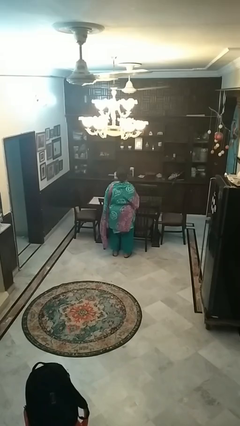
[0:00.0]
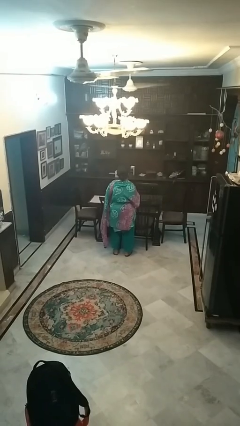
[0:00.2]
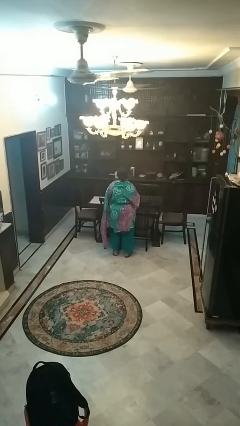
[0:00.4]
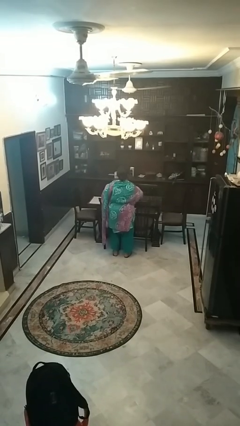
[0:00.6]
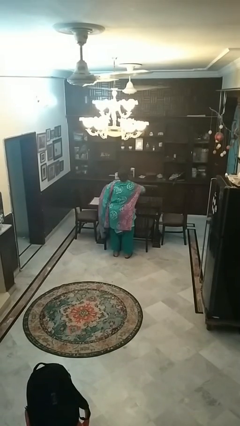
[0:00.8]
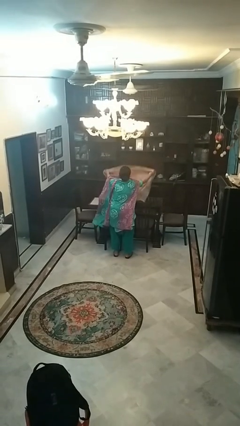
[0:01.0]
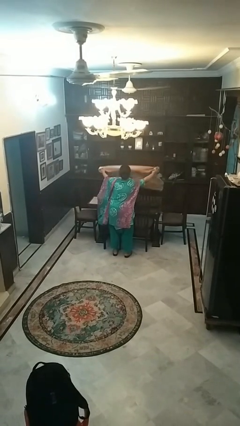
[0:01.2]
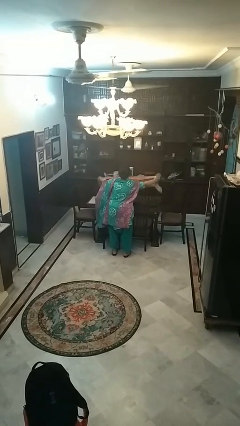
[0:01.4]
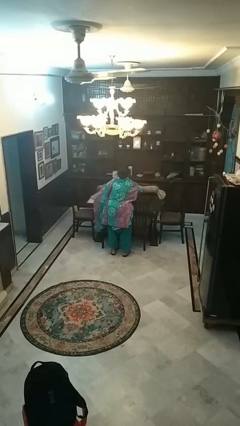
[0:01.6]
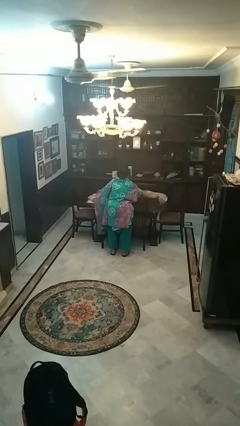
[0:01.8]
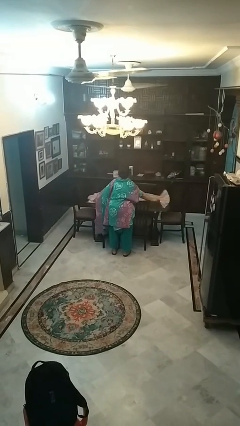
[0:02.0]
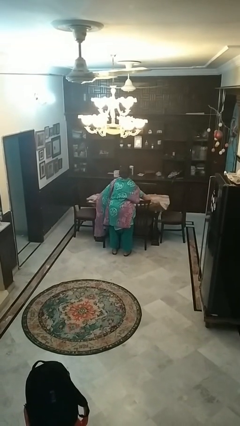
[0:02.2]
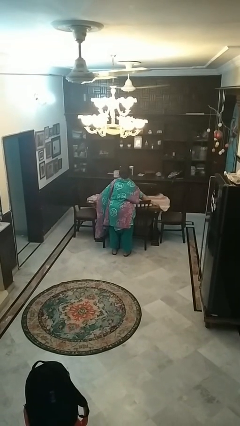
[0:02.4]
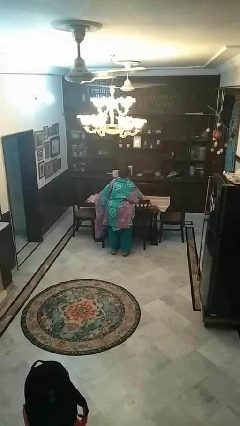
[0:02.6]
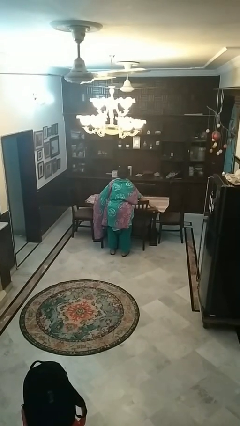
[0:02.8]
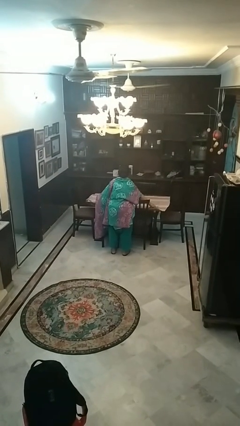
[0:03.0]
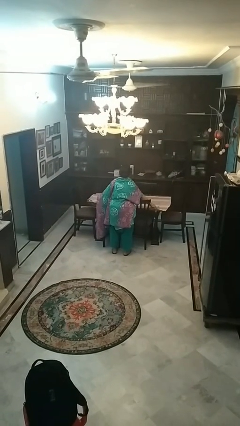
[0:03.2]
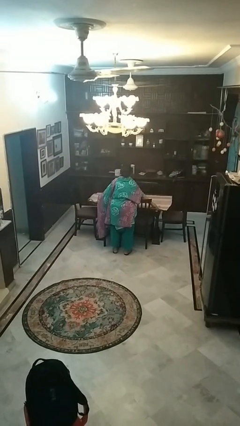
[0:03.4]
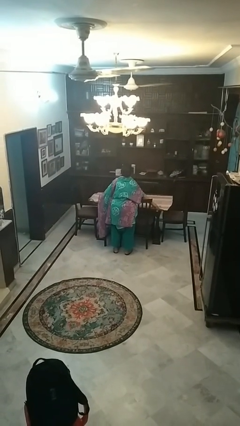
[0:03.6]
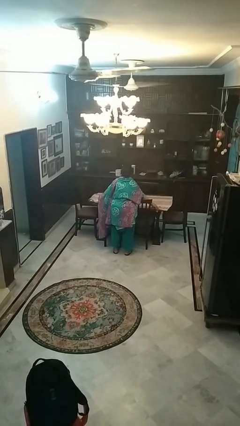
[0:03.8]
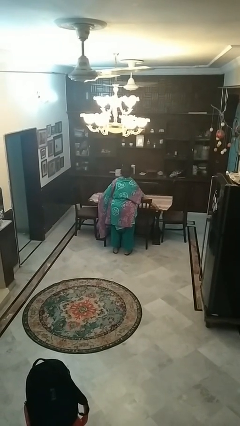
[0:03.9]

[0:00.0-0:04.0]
person spreads tablecloth

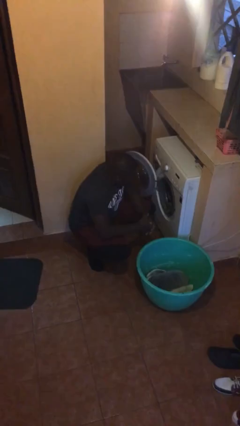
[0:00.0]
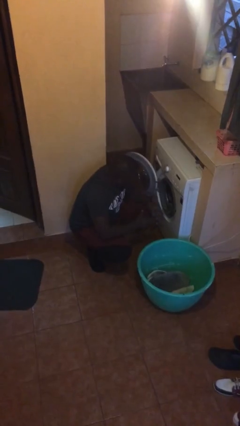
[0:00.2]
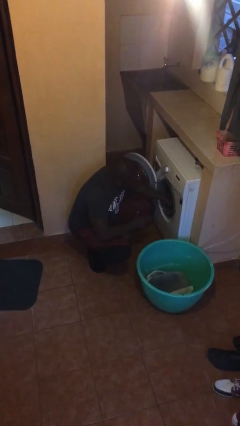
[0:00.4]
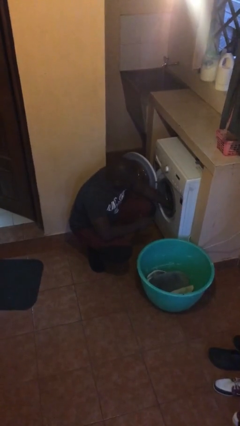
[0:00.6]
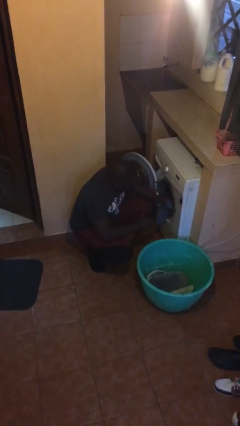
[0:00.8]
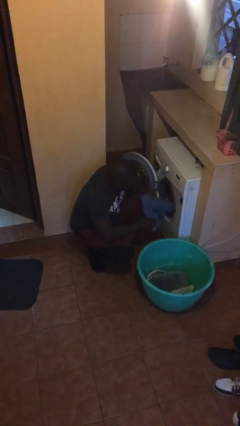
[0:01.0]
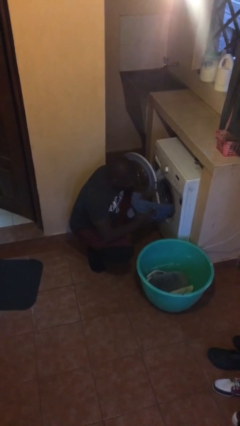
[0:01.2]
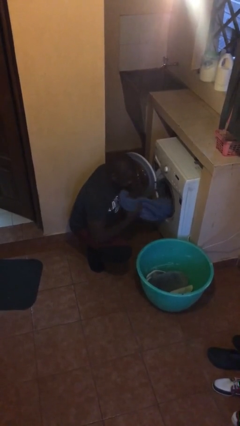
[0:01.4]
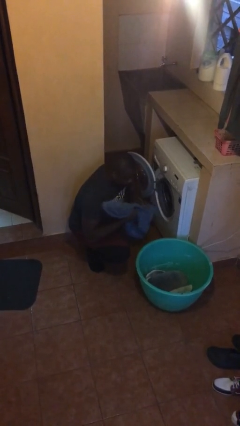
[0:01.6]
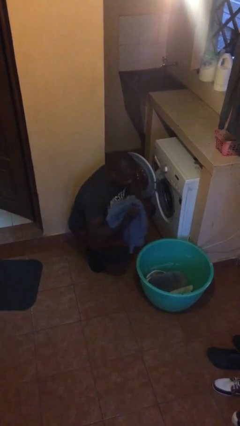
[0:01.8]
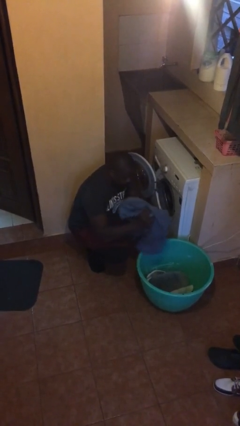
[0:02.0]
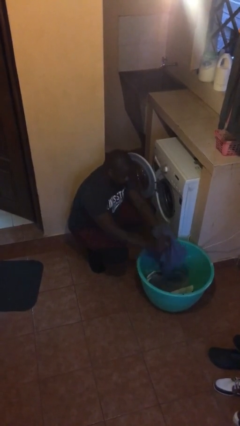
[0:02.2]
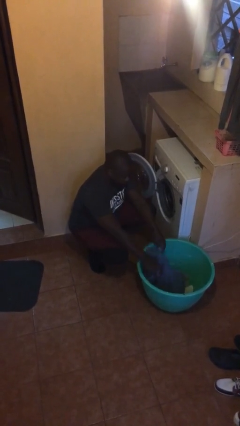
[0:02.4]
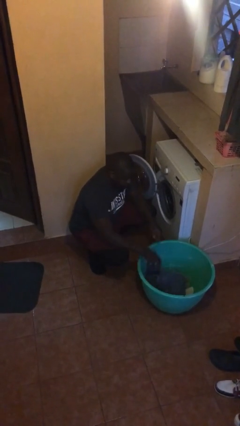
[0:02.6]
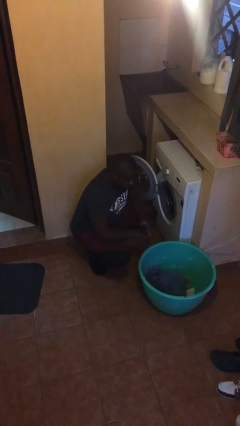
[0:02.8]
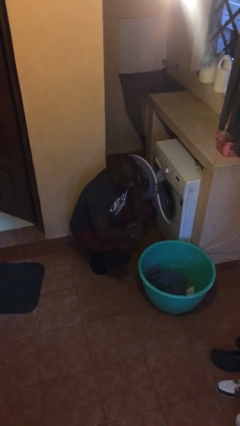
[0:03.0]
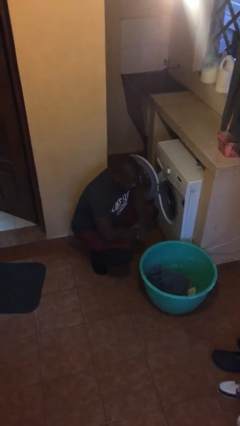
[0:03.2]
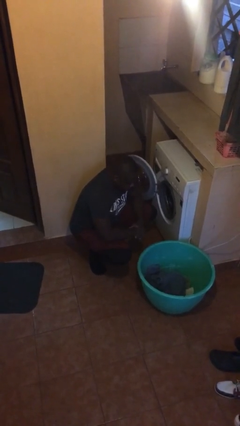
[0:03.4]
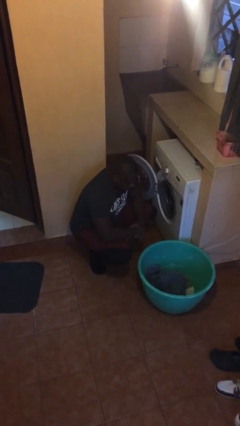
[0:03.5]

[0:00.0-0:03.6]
person unloads clotheswasher

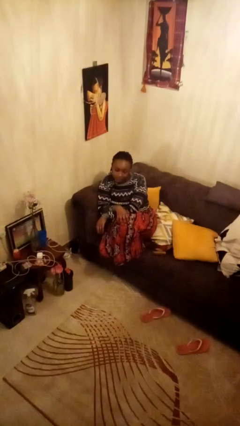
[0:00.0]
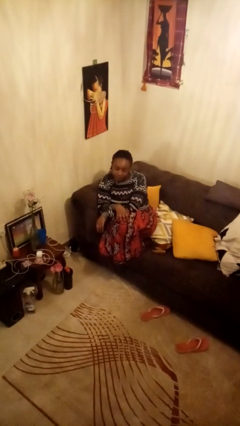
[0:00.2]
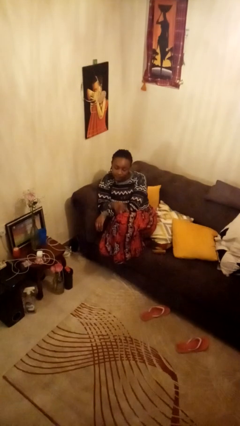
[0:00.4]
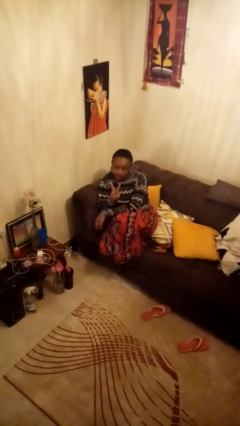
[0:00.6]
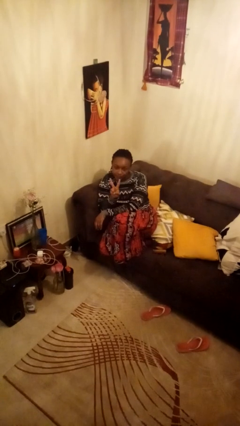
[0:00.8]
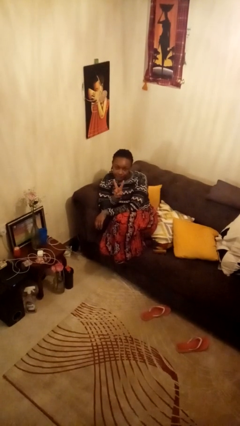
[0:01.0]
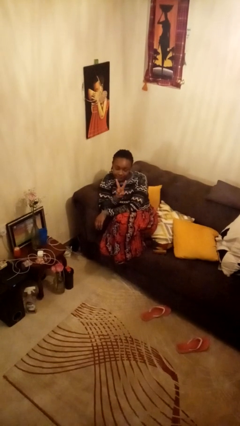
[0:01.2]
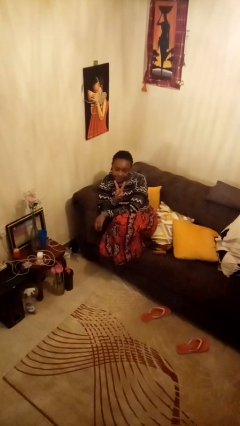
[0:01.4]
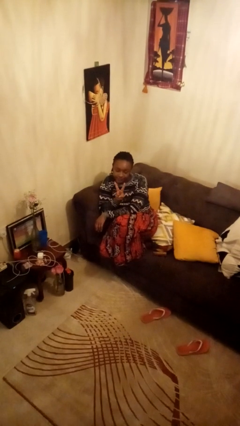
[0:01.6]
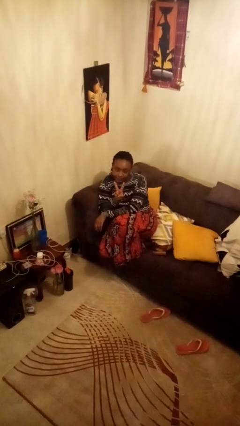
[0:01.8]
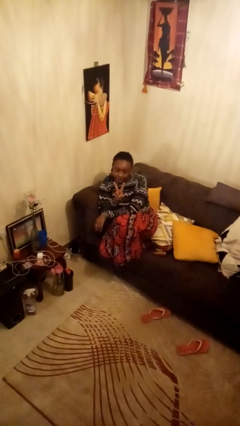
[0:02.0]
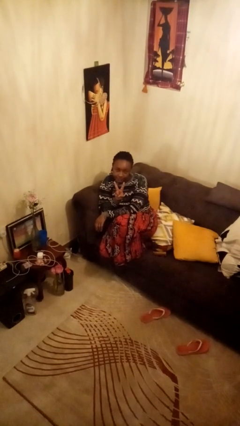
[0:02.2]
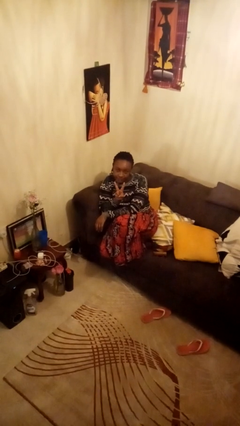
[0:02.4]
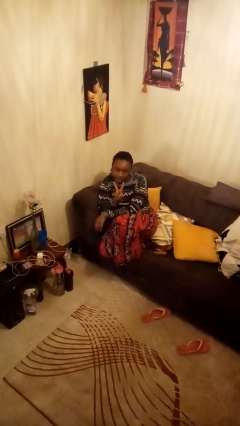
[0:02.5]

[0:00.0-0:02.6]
person gestures peace

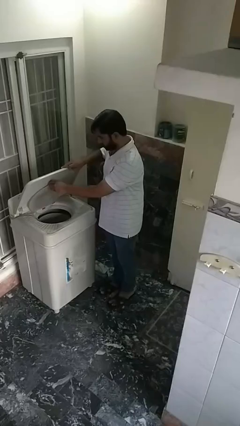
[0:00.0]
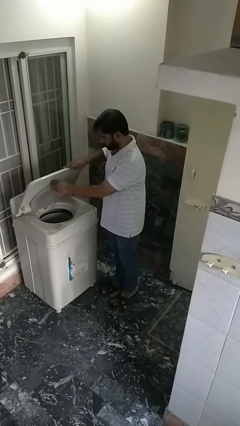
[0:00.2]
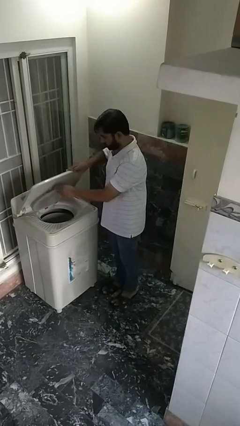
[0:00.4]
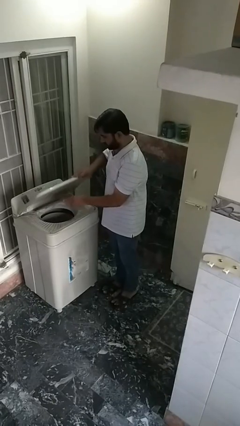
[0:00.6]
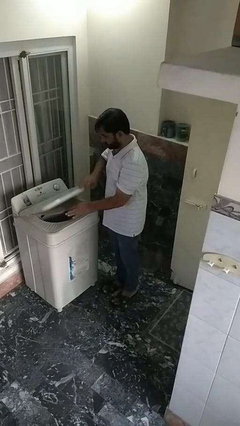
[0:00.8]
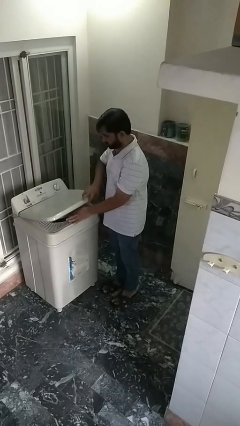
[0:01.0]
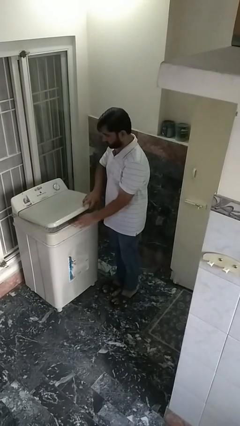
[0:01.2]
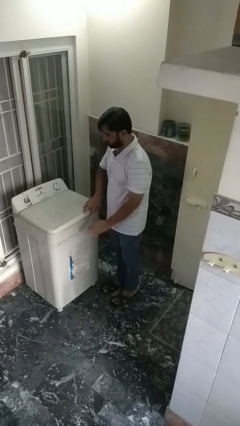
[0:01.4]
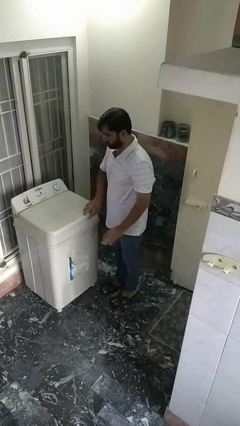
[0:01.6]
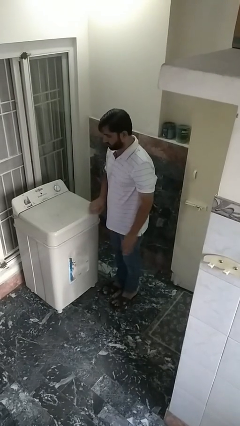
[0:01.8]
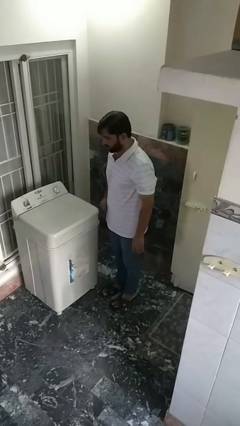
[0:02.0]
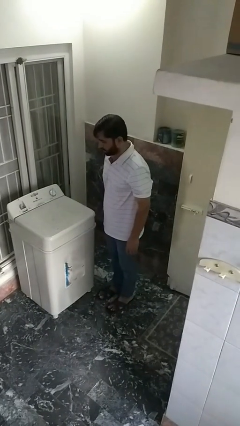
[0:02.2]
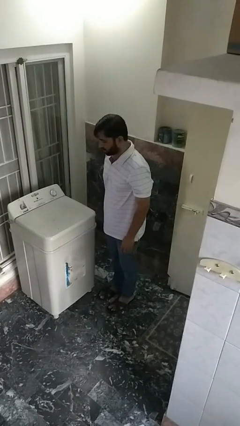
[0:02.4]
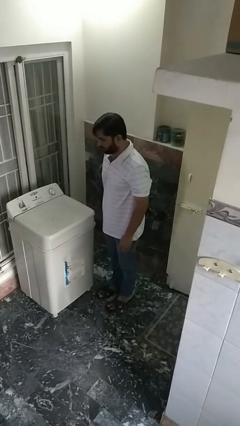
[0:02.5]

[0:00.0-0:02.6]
person closes clothes washer

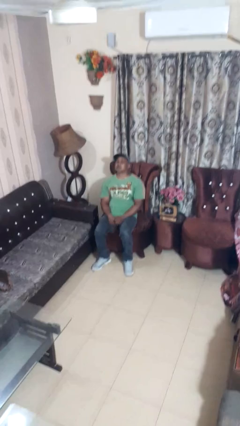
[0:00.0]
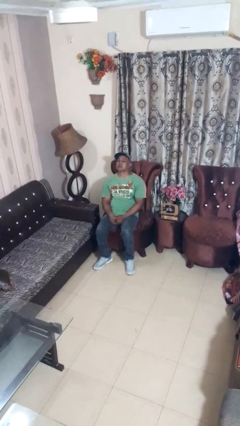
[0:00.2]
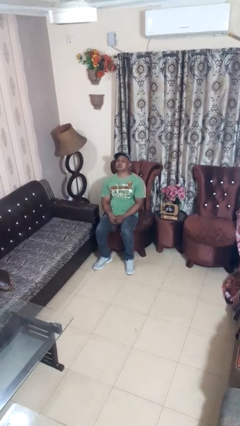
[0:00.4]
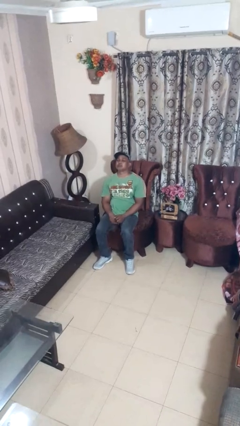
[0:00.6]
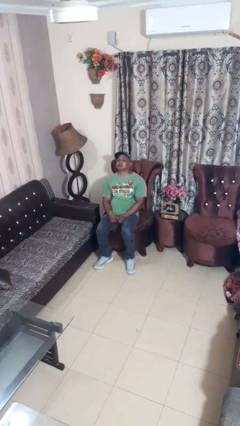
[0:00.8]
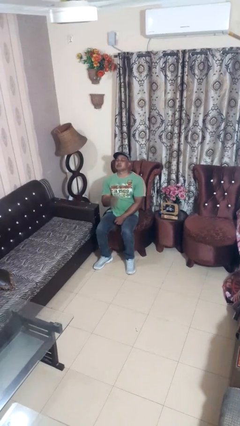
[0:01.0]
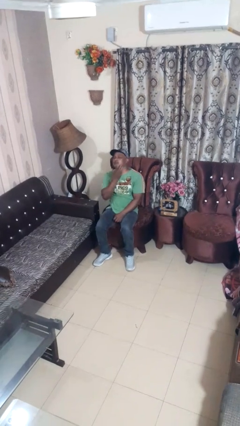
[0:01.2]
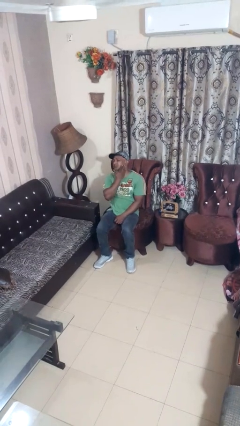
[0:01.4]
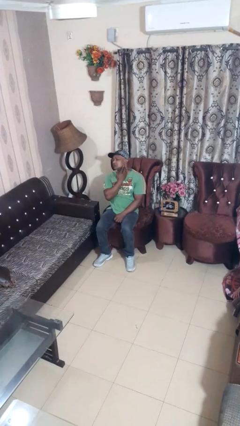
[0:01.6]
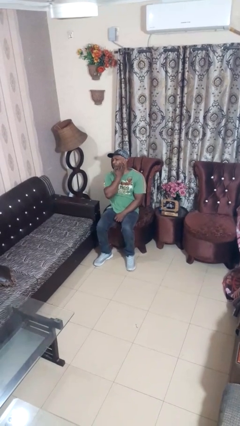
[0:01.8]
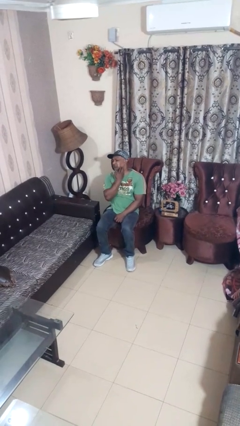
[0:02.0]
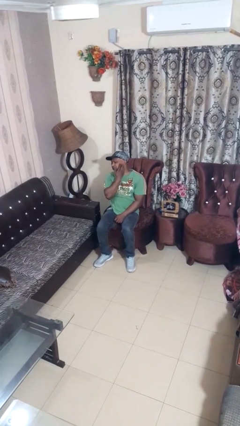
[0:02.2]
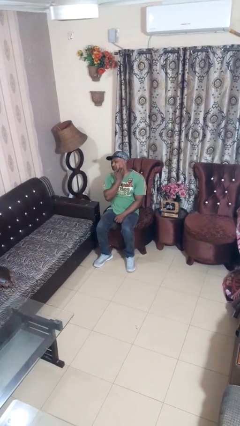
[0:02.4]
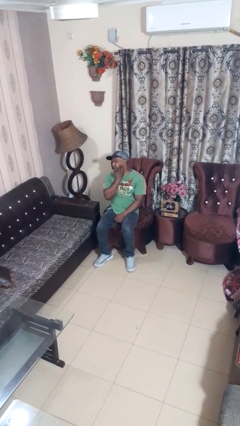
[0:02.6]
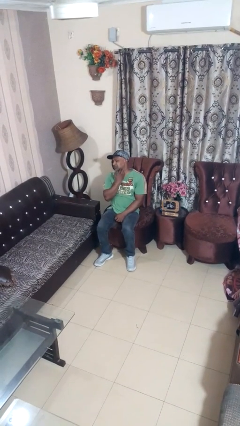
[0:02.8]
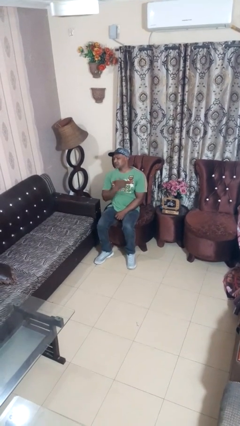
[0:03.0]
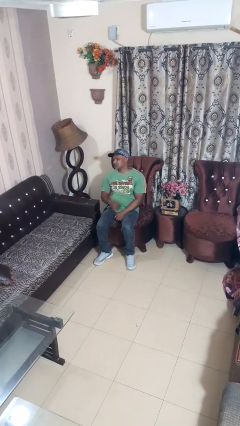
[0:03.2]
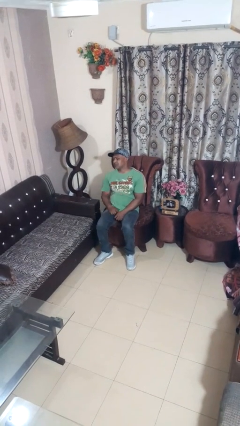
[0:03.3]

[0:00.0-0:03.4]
person swats bug

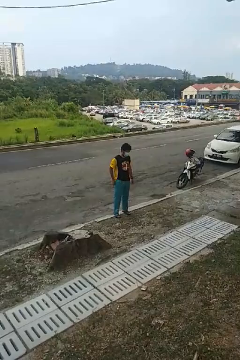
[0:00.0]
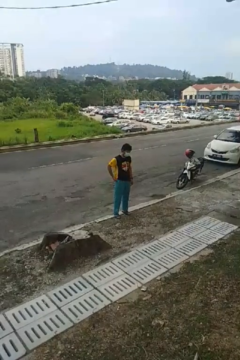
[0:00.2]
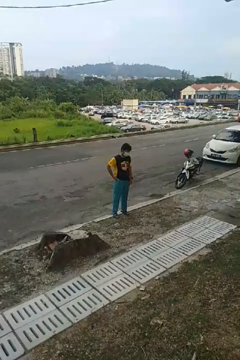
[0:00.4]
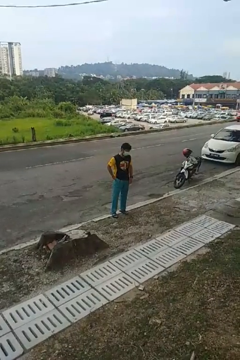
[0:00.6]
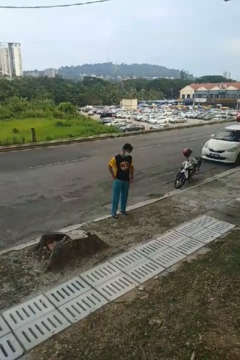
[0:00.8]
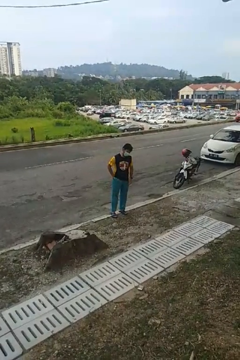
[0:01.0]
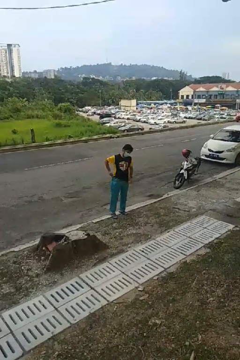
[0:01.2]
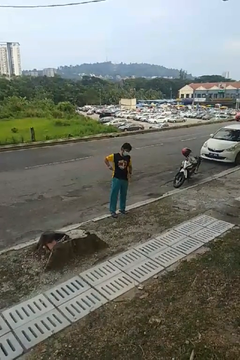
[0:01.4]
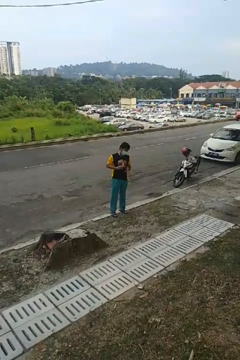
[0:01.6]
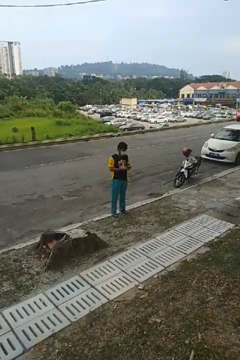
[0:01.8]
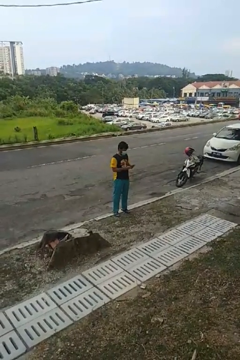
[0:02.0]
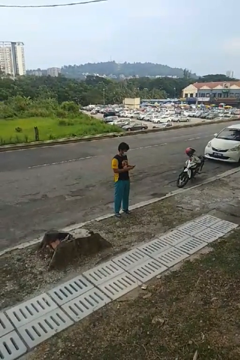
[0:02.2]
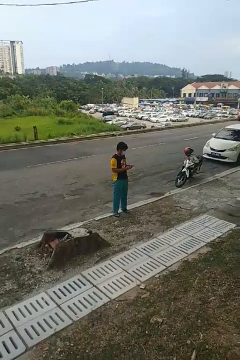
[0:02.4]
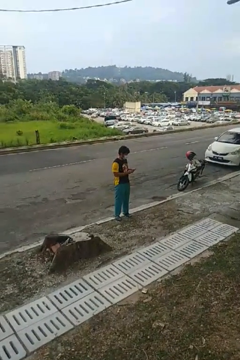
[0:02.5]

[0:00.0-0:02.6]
person takes phone from pocket
